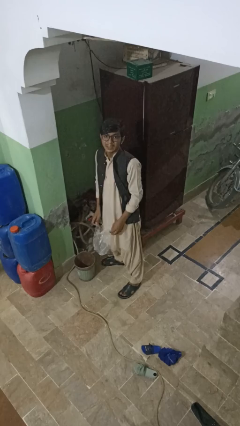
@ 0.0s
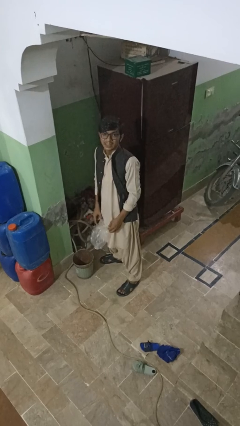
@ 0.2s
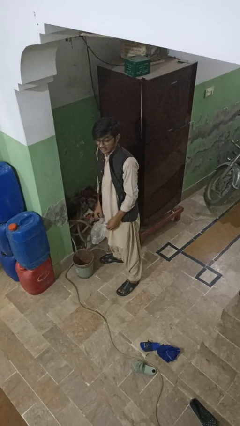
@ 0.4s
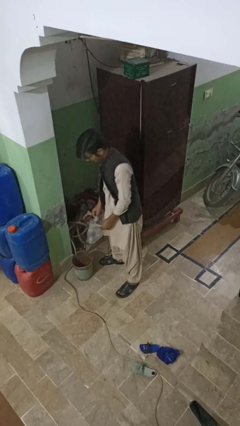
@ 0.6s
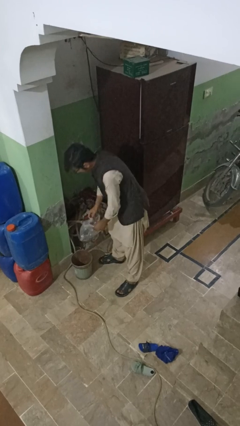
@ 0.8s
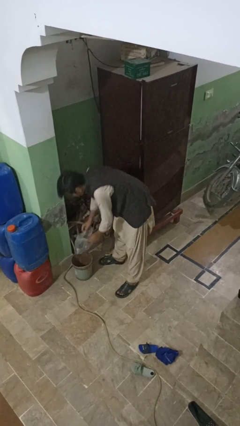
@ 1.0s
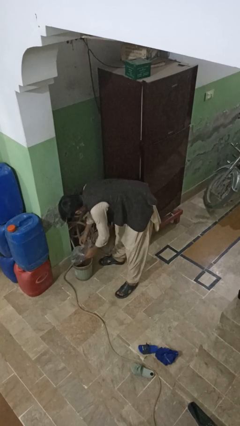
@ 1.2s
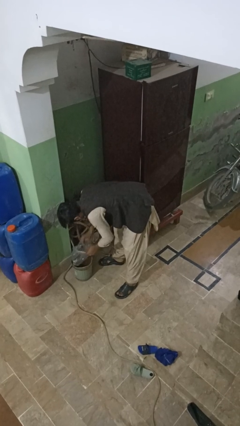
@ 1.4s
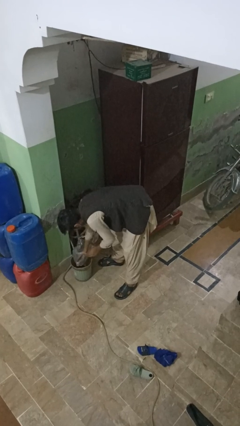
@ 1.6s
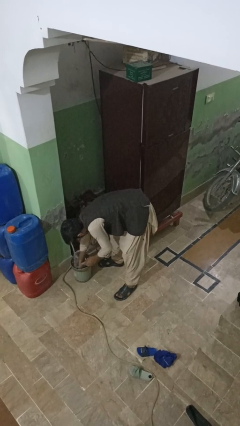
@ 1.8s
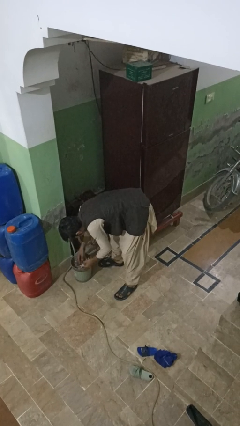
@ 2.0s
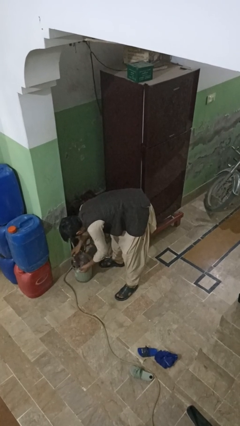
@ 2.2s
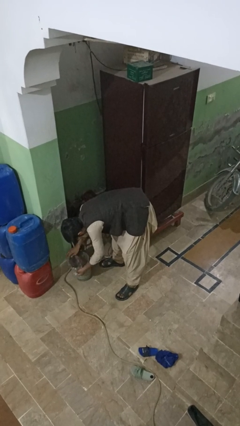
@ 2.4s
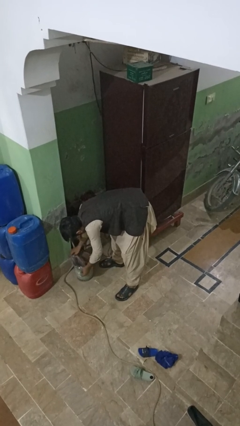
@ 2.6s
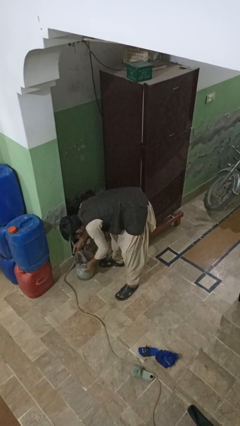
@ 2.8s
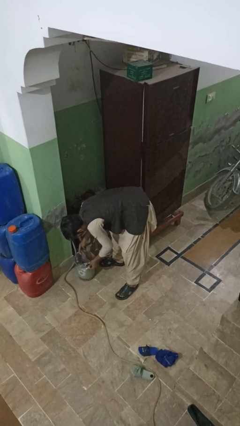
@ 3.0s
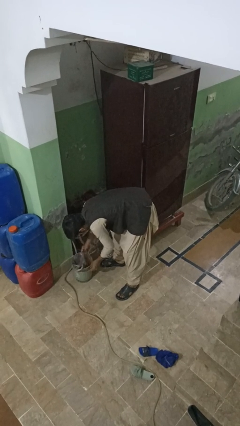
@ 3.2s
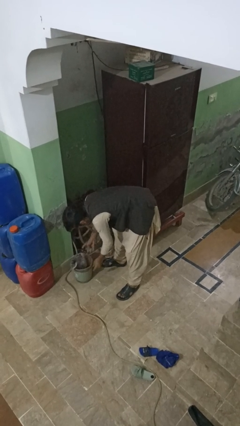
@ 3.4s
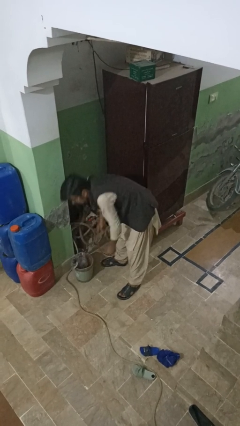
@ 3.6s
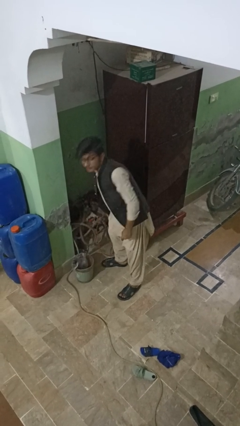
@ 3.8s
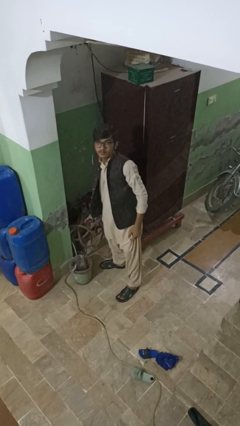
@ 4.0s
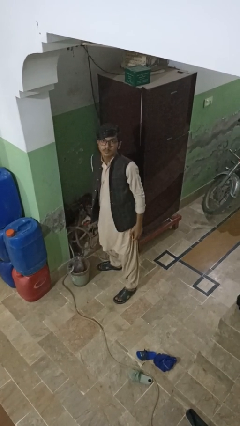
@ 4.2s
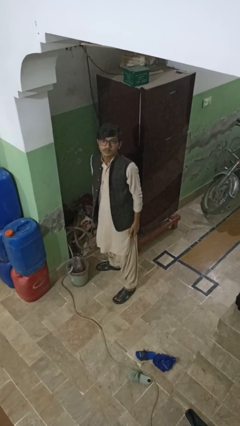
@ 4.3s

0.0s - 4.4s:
person inserts trashbag into trashcan

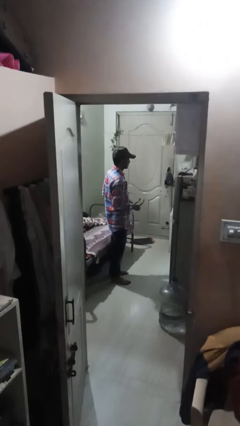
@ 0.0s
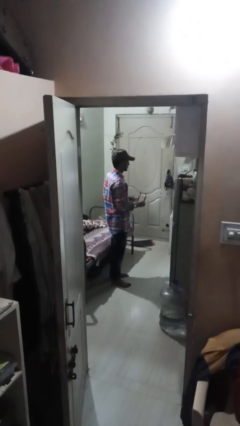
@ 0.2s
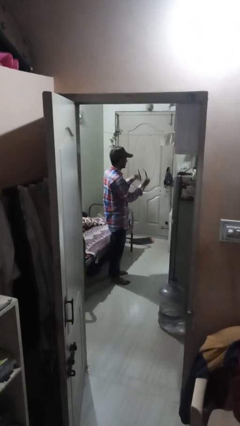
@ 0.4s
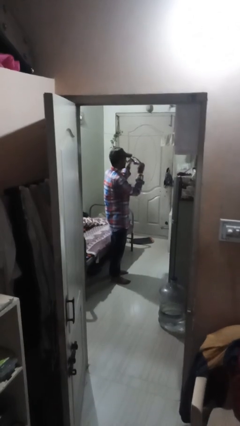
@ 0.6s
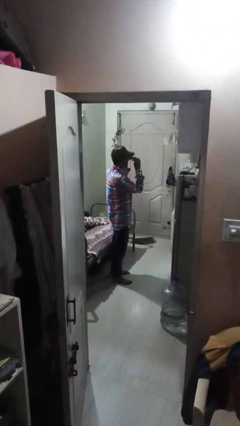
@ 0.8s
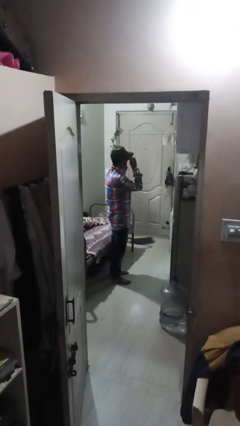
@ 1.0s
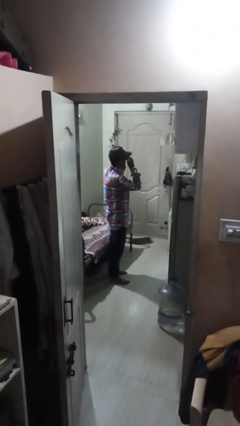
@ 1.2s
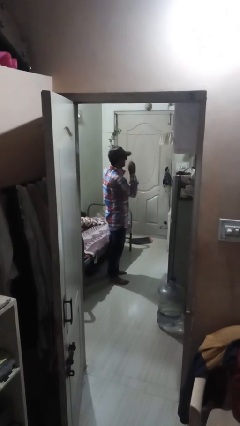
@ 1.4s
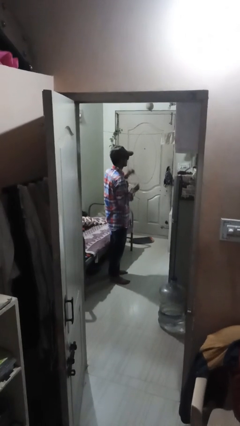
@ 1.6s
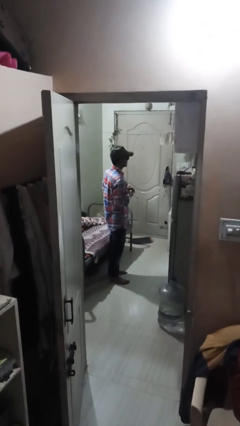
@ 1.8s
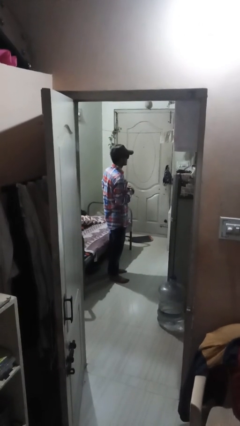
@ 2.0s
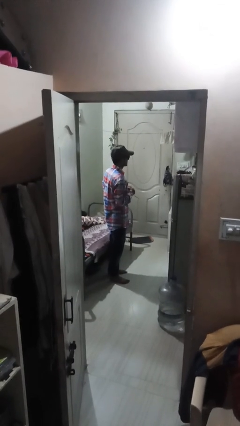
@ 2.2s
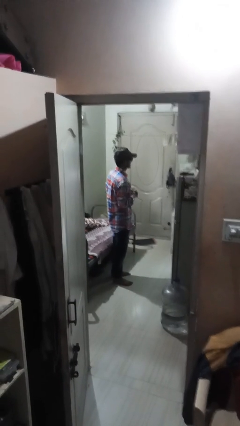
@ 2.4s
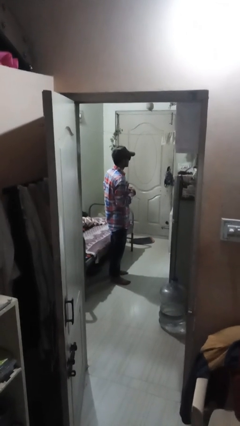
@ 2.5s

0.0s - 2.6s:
person puts on sunglasses

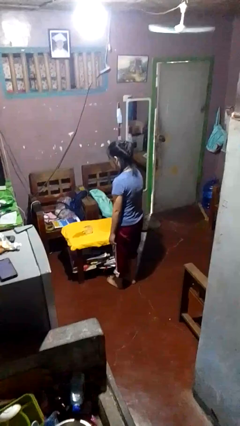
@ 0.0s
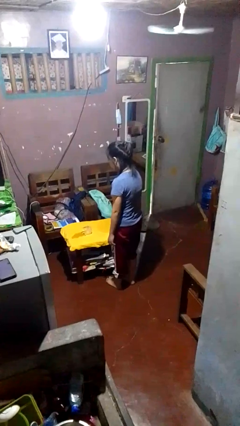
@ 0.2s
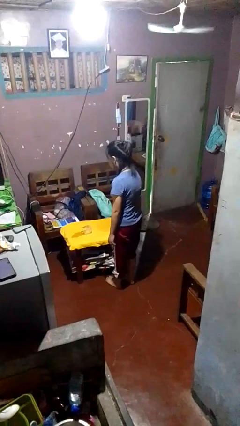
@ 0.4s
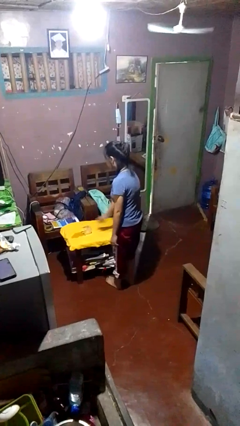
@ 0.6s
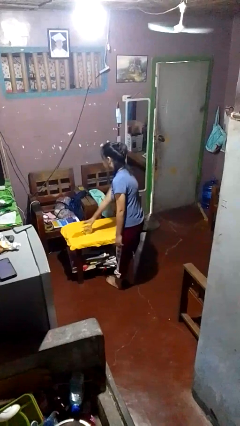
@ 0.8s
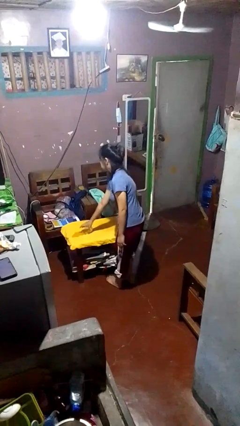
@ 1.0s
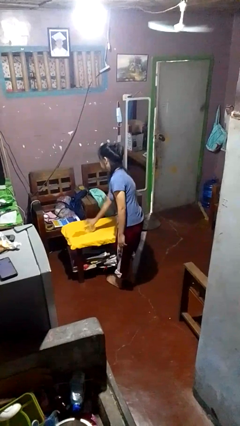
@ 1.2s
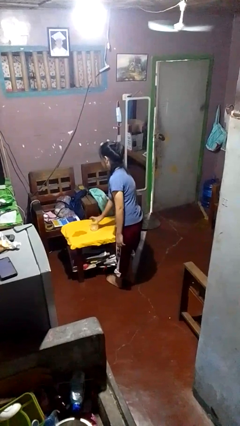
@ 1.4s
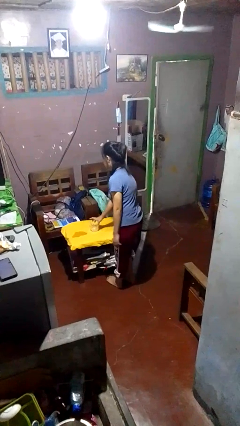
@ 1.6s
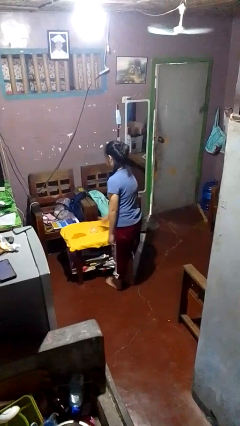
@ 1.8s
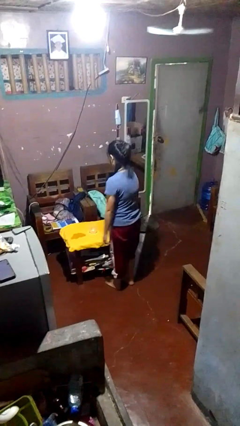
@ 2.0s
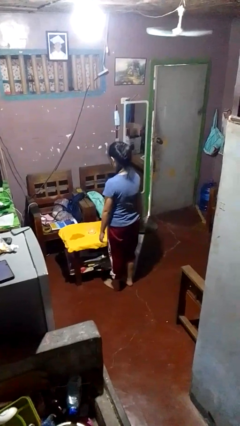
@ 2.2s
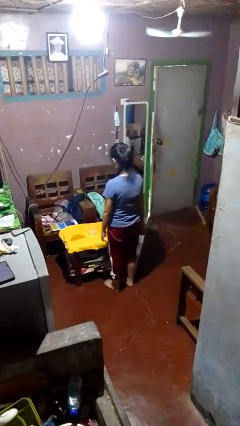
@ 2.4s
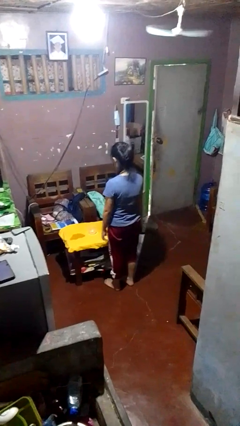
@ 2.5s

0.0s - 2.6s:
person sets upright glass

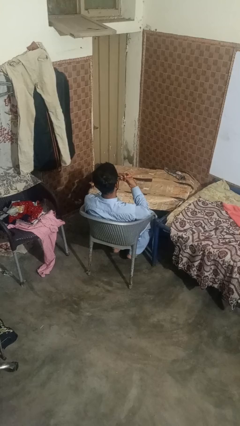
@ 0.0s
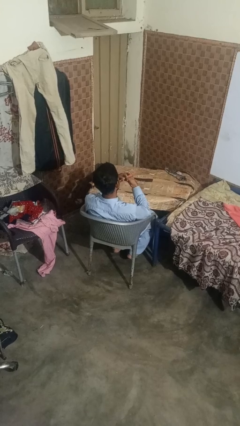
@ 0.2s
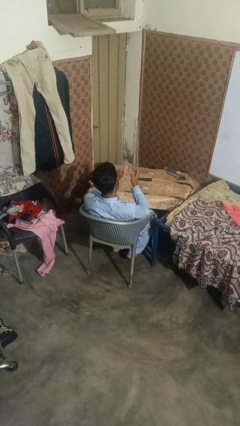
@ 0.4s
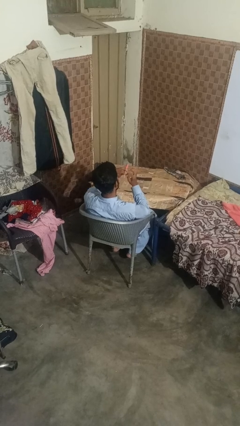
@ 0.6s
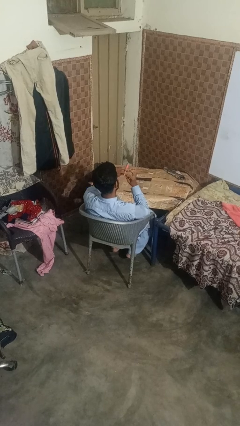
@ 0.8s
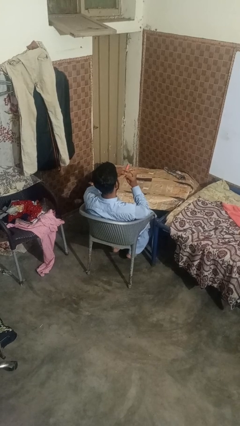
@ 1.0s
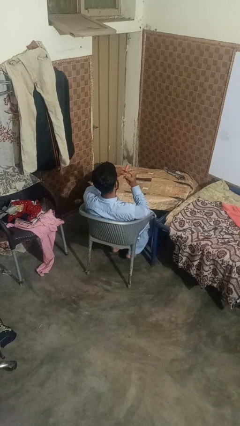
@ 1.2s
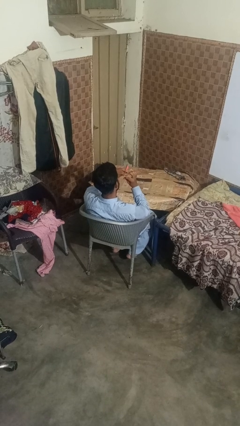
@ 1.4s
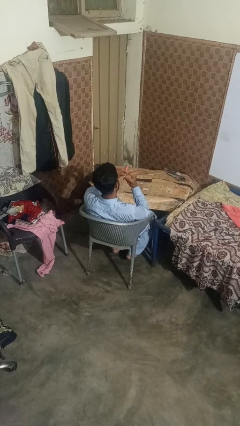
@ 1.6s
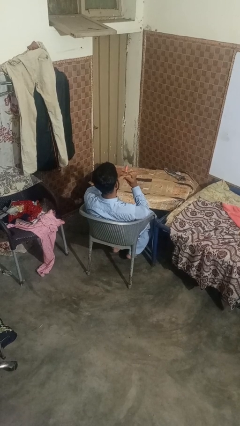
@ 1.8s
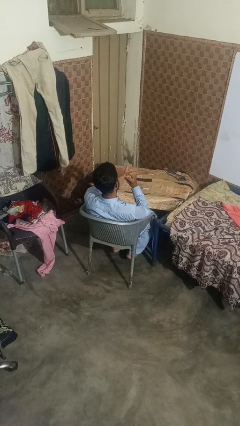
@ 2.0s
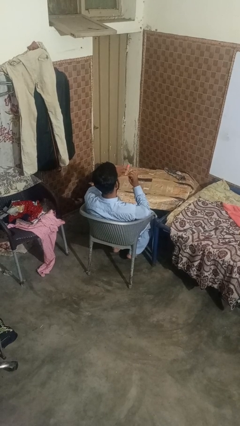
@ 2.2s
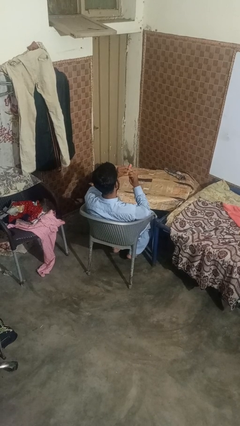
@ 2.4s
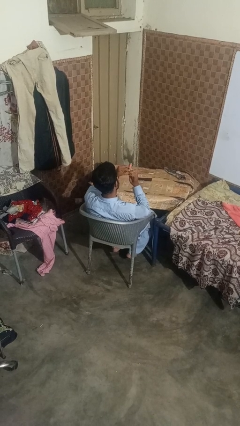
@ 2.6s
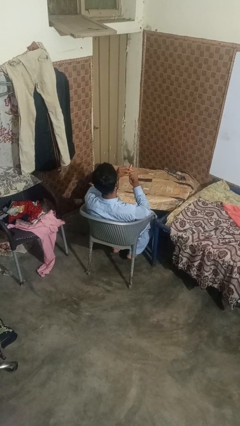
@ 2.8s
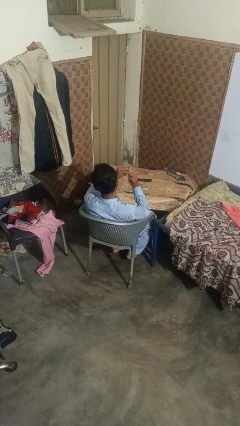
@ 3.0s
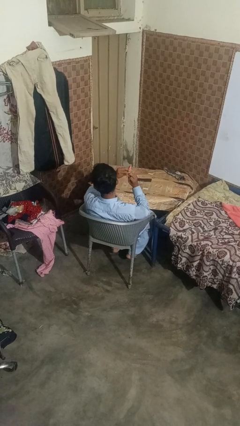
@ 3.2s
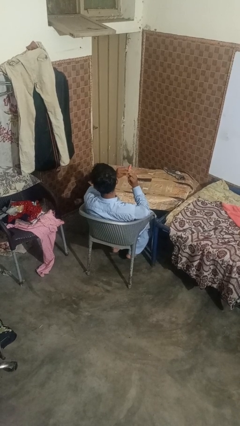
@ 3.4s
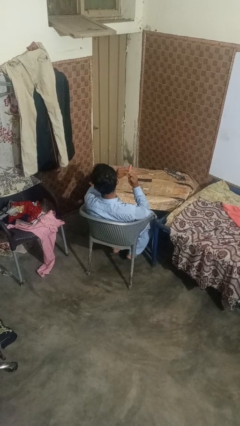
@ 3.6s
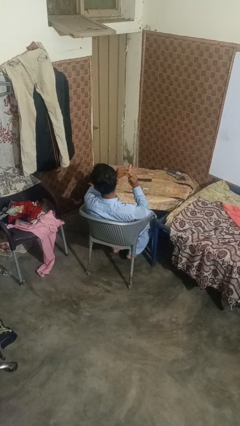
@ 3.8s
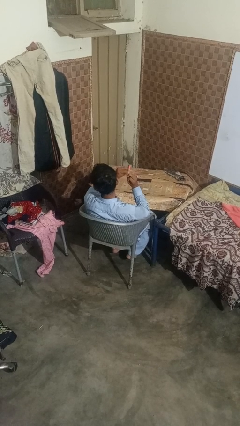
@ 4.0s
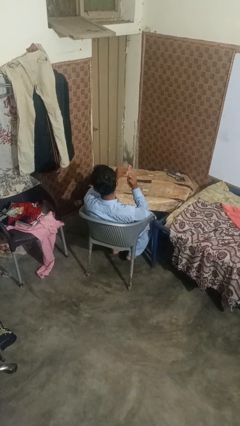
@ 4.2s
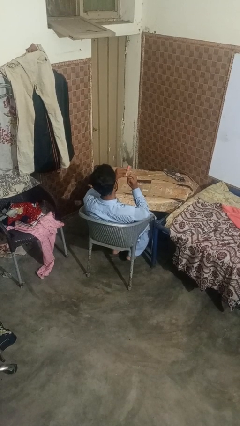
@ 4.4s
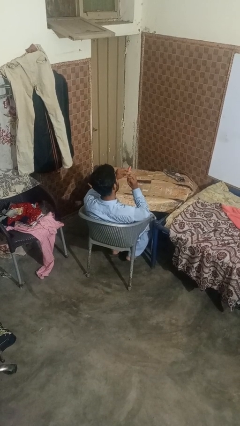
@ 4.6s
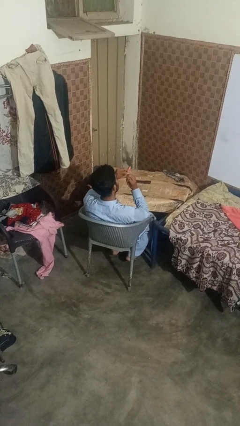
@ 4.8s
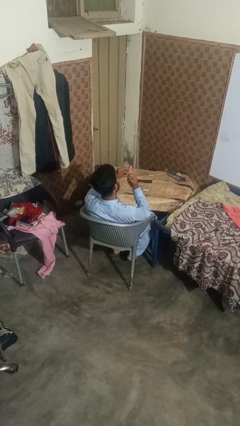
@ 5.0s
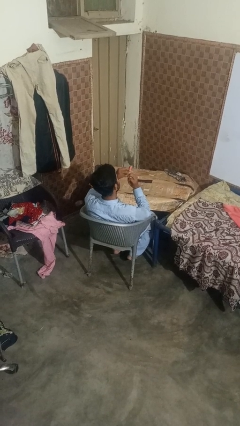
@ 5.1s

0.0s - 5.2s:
person files fingernails

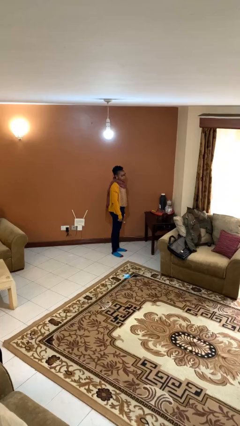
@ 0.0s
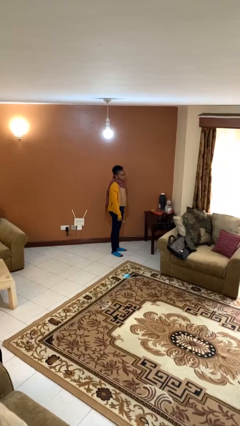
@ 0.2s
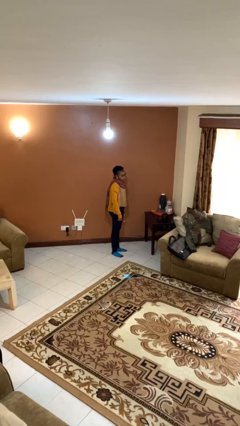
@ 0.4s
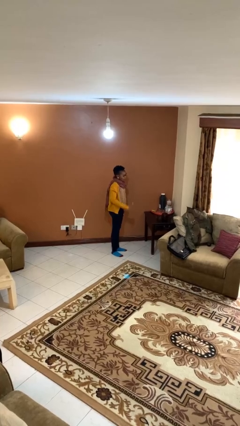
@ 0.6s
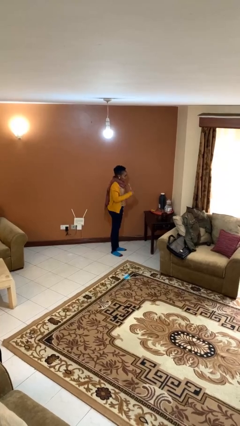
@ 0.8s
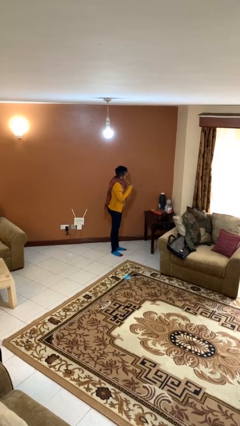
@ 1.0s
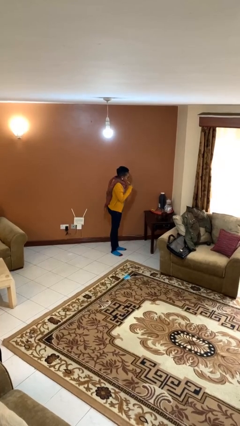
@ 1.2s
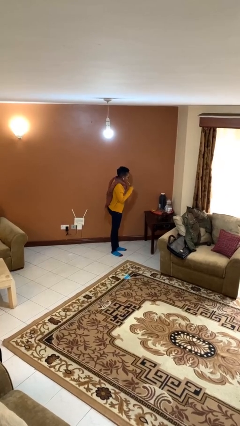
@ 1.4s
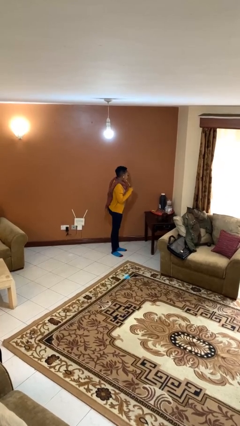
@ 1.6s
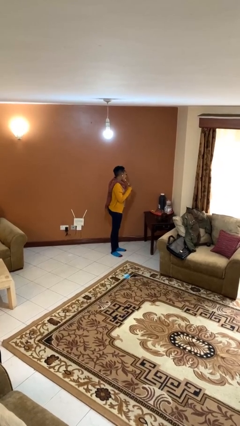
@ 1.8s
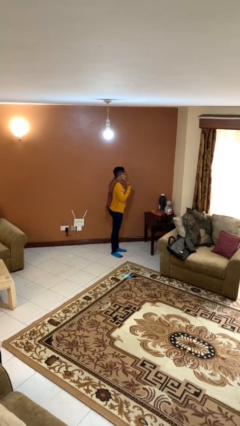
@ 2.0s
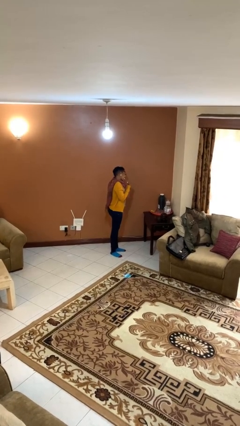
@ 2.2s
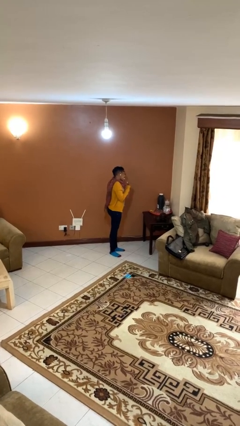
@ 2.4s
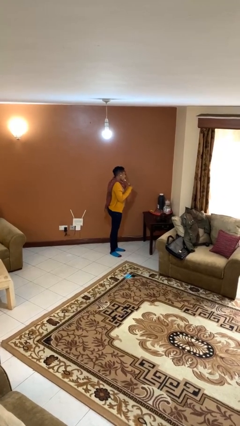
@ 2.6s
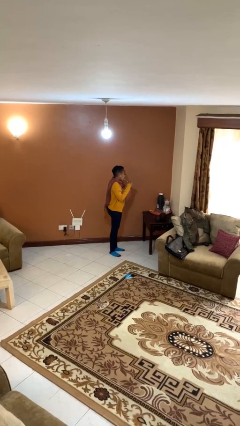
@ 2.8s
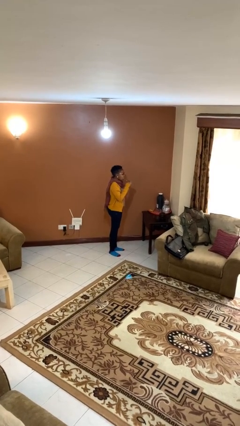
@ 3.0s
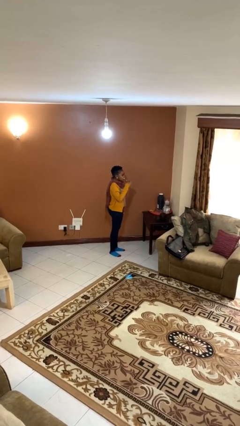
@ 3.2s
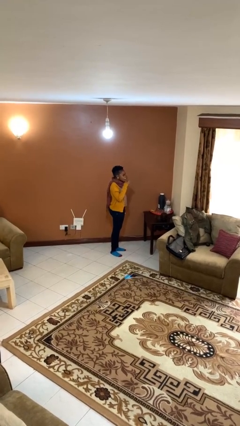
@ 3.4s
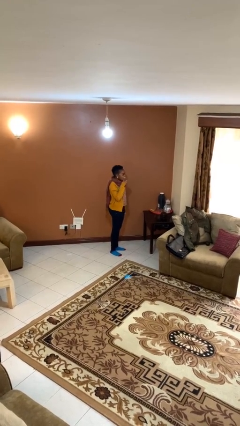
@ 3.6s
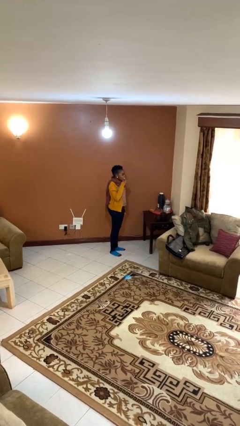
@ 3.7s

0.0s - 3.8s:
person brushes teeth
